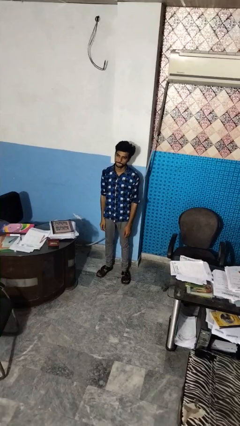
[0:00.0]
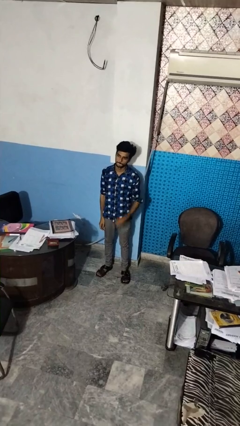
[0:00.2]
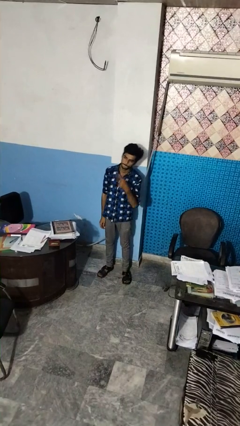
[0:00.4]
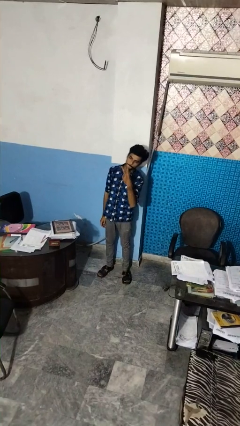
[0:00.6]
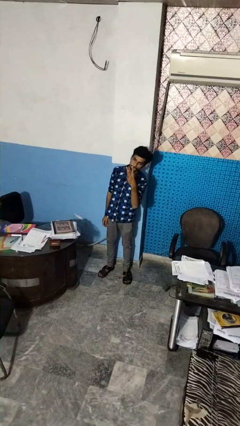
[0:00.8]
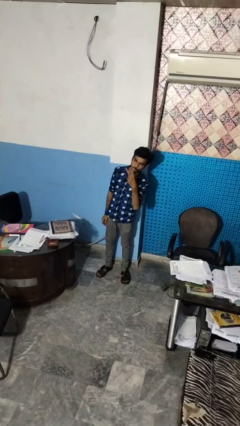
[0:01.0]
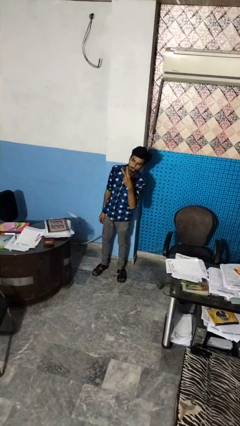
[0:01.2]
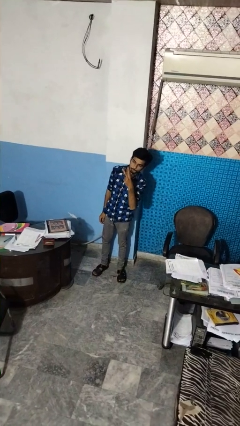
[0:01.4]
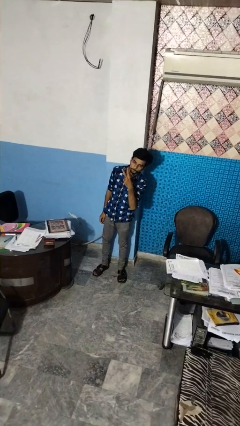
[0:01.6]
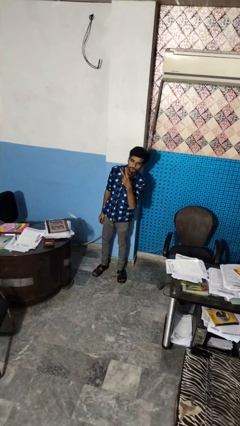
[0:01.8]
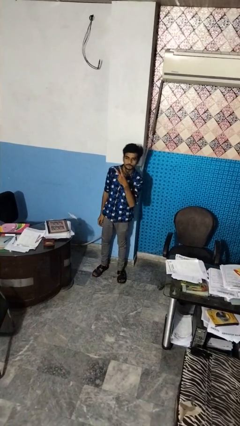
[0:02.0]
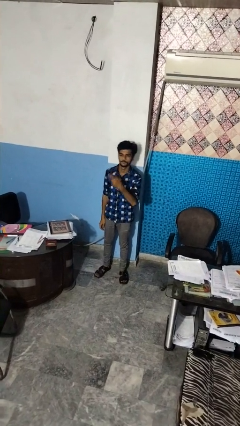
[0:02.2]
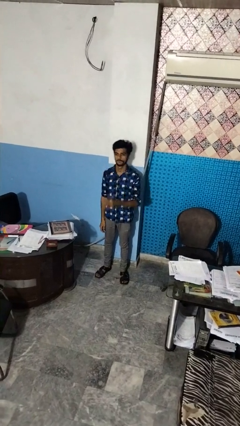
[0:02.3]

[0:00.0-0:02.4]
person gestures peace

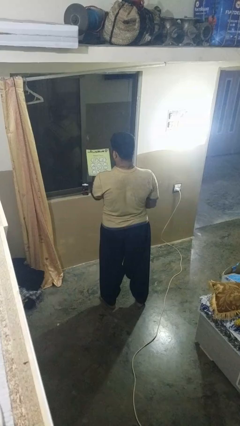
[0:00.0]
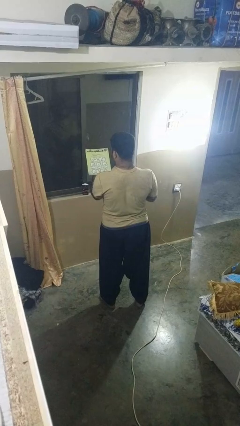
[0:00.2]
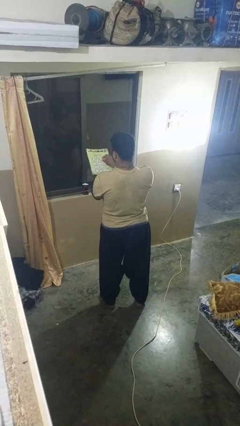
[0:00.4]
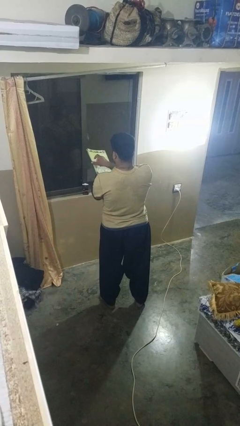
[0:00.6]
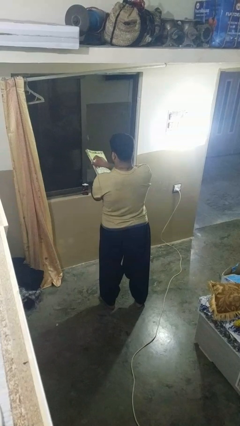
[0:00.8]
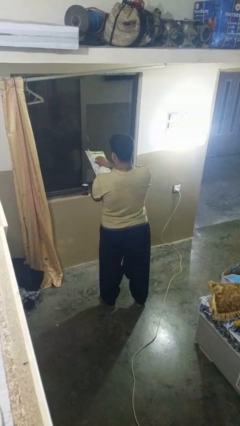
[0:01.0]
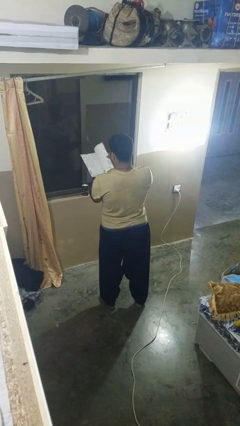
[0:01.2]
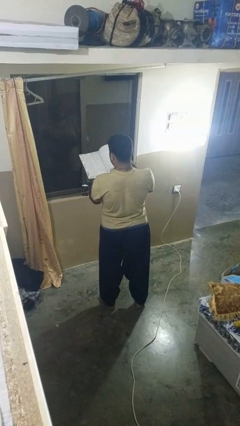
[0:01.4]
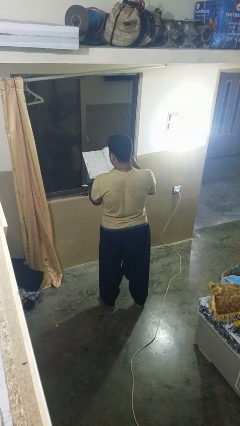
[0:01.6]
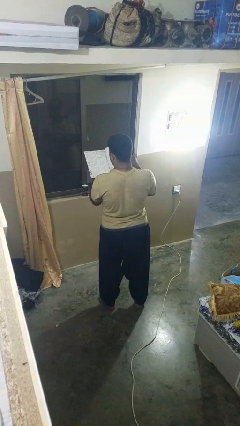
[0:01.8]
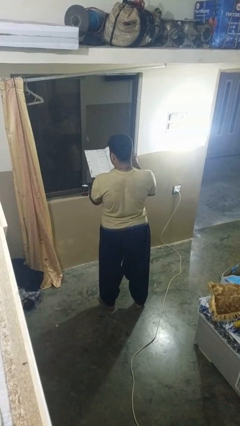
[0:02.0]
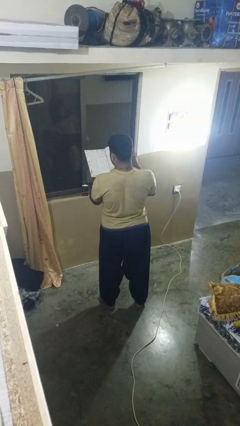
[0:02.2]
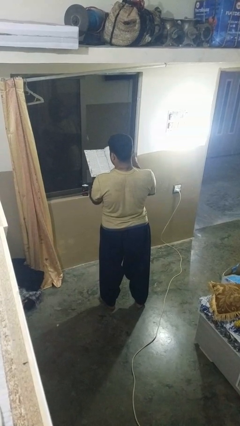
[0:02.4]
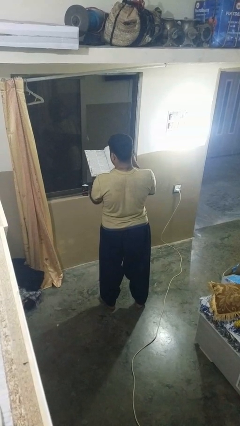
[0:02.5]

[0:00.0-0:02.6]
person reads magazine

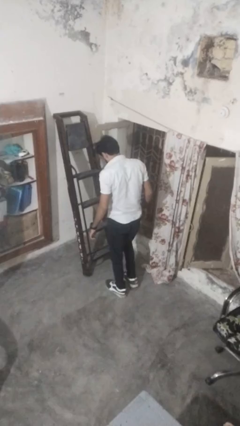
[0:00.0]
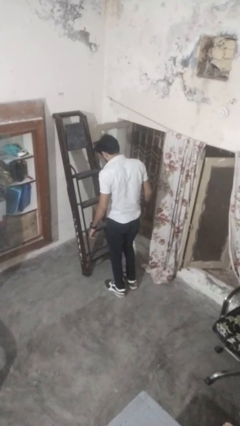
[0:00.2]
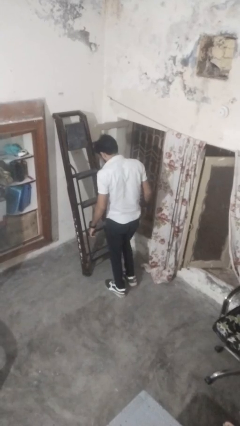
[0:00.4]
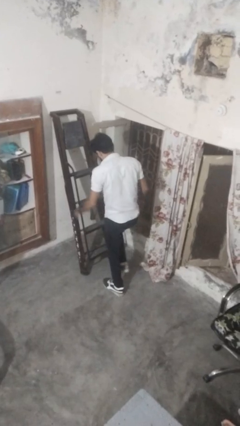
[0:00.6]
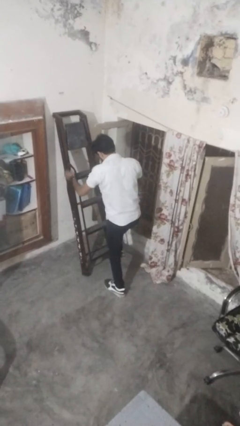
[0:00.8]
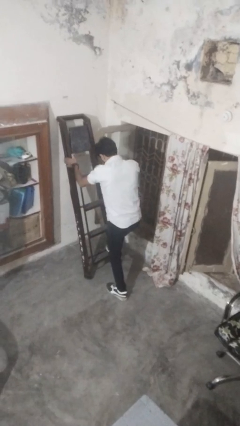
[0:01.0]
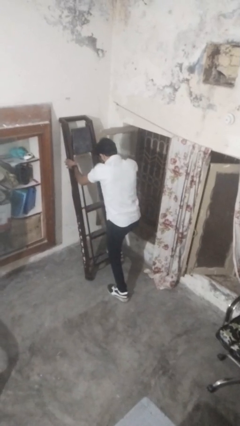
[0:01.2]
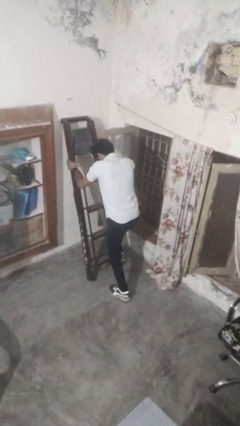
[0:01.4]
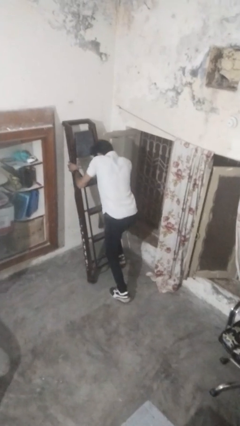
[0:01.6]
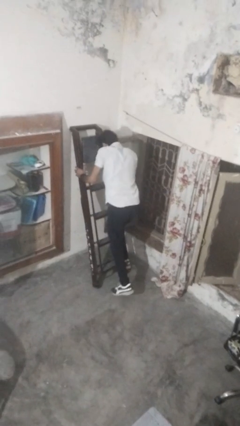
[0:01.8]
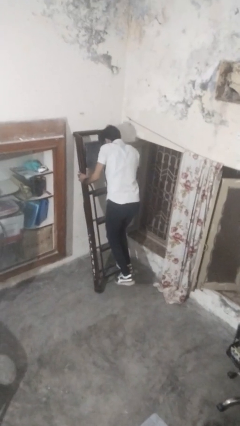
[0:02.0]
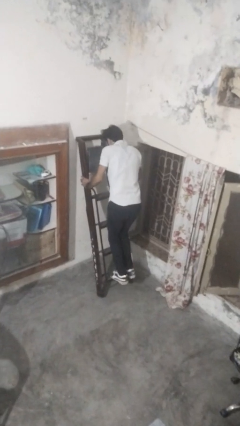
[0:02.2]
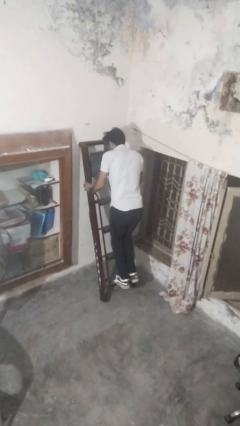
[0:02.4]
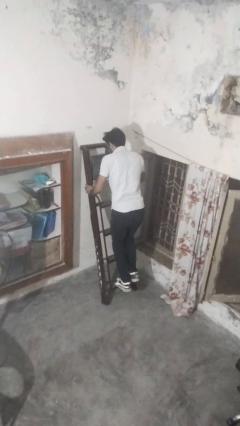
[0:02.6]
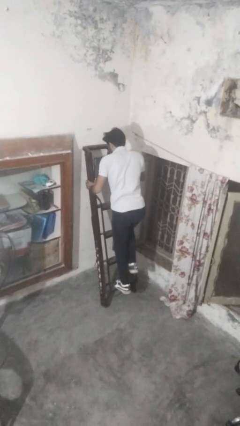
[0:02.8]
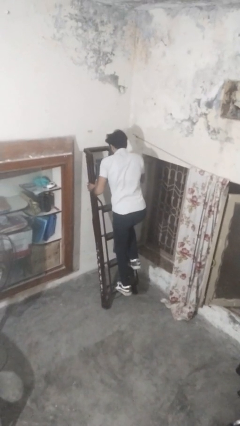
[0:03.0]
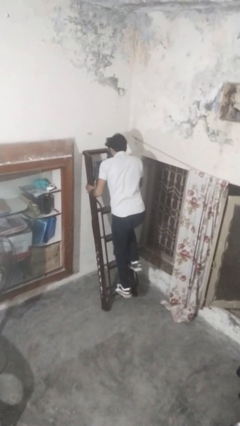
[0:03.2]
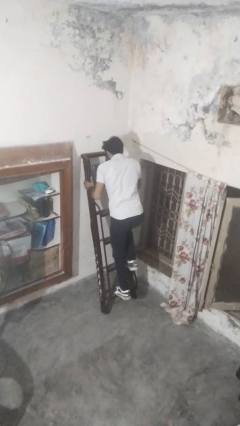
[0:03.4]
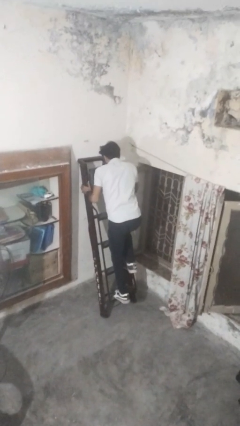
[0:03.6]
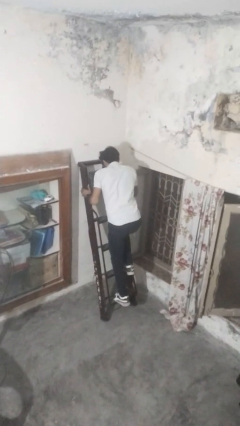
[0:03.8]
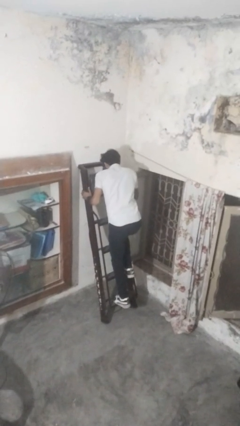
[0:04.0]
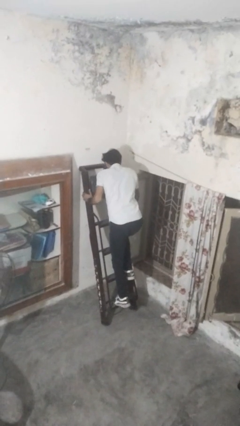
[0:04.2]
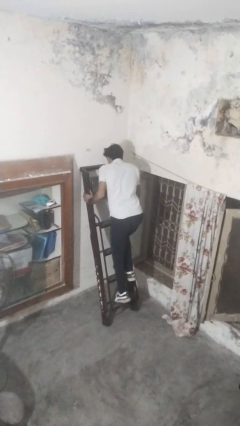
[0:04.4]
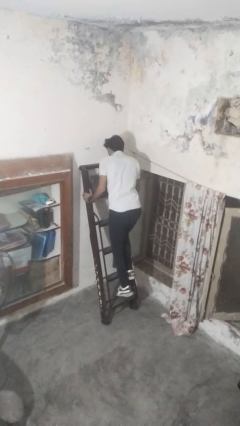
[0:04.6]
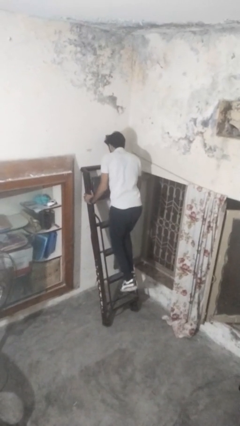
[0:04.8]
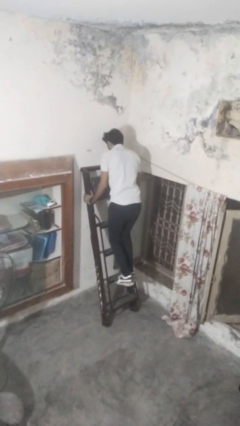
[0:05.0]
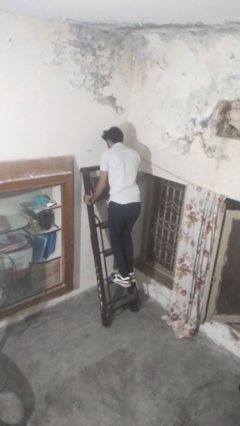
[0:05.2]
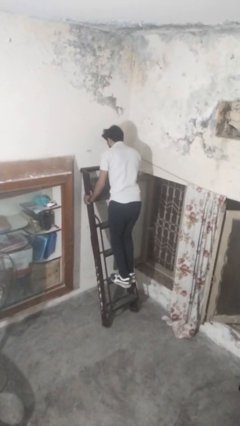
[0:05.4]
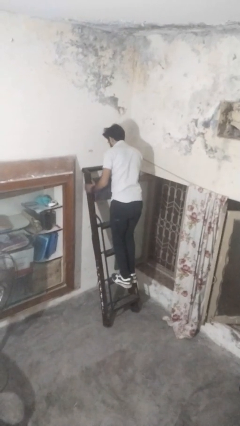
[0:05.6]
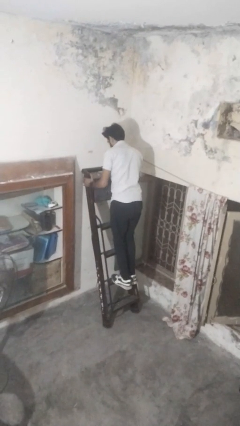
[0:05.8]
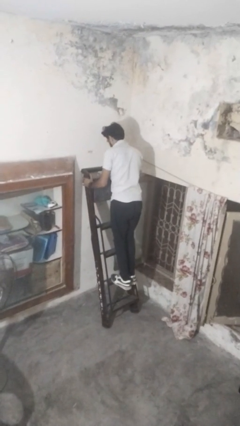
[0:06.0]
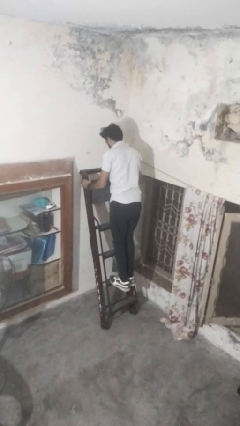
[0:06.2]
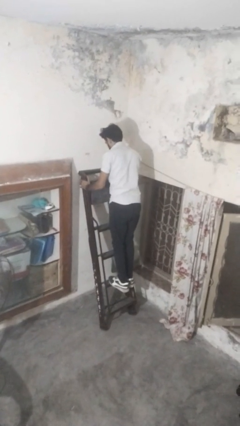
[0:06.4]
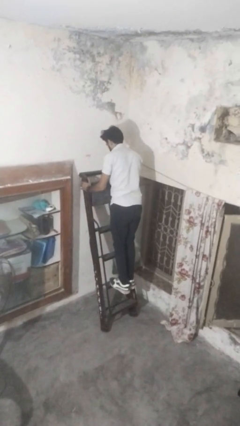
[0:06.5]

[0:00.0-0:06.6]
person climbs up ladder

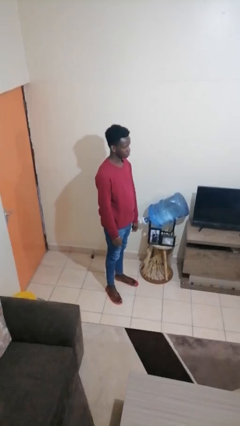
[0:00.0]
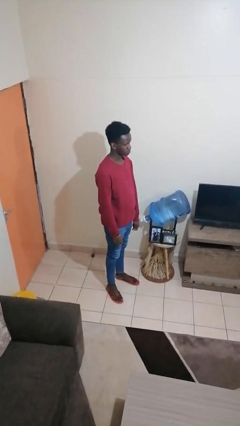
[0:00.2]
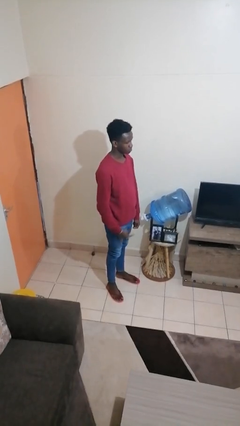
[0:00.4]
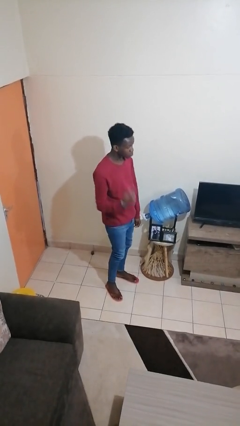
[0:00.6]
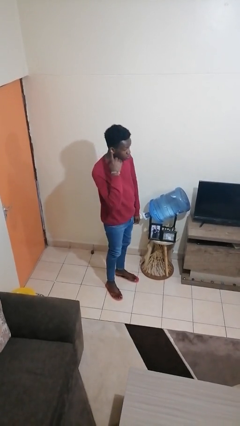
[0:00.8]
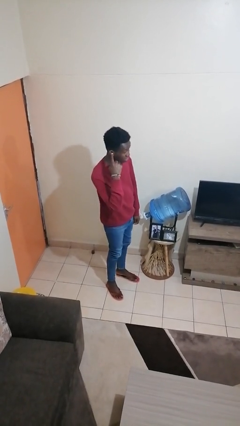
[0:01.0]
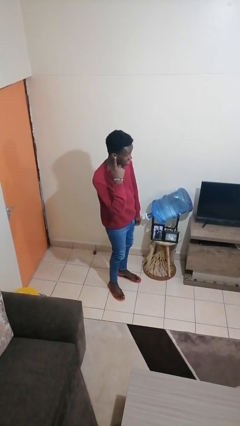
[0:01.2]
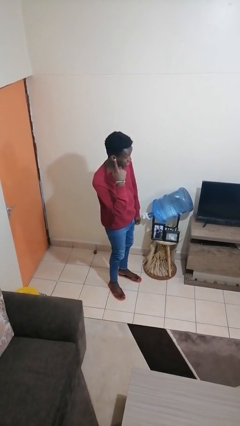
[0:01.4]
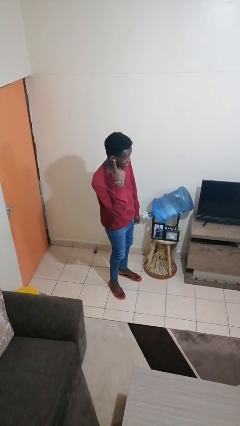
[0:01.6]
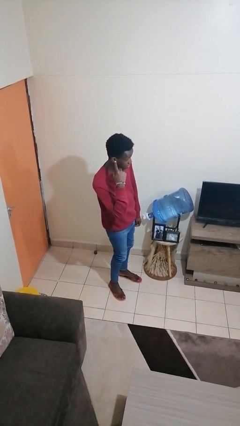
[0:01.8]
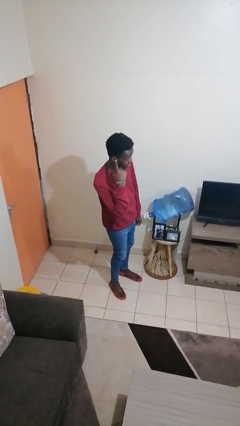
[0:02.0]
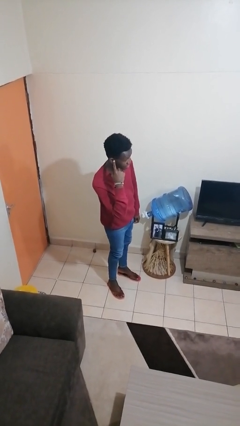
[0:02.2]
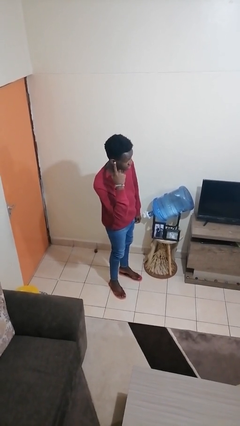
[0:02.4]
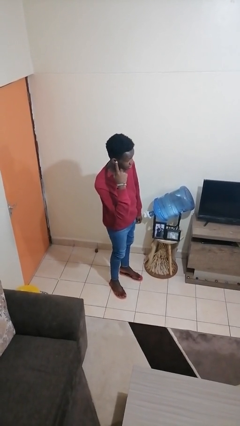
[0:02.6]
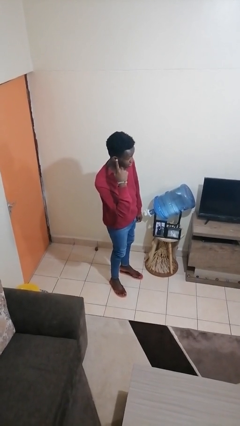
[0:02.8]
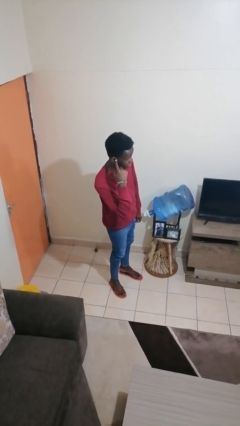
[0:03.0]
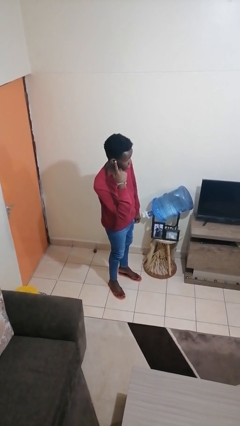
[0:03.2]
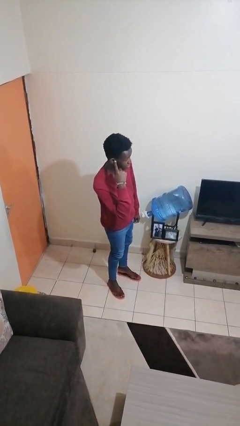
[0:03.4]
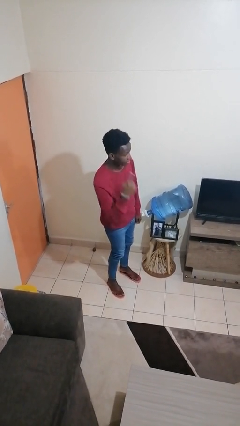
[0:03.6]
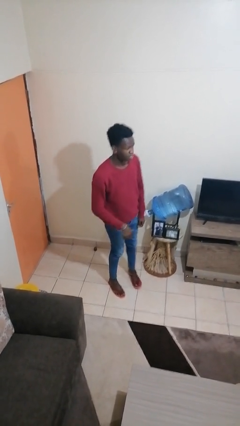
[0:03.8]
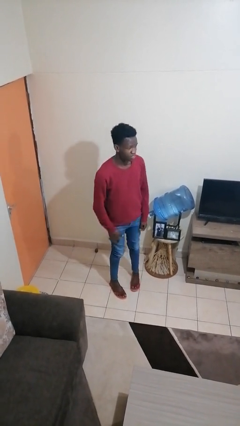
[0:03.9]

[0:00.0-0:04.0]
person gestures listen closely

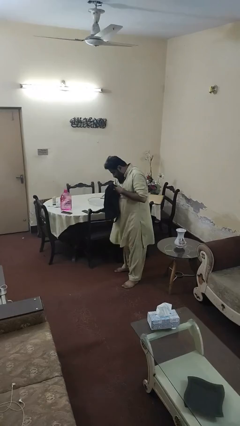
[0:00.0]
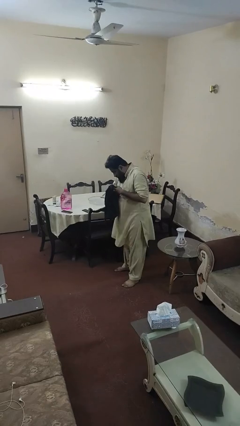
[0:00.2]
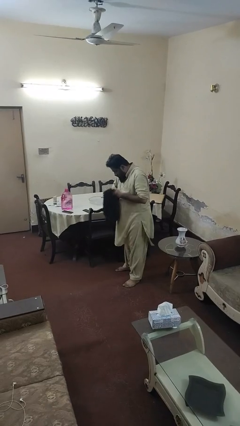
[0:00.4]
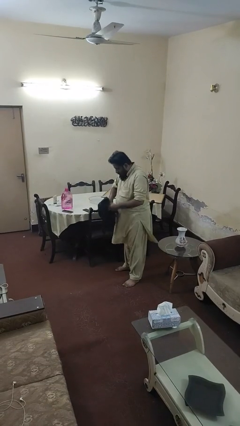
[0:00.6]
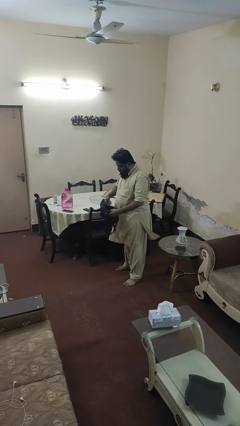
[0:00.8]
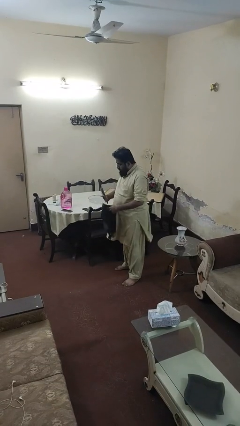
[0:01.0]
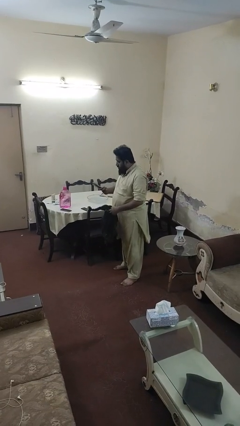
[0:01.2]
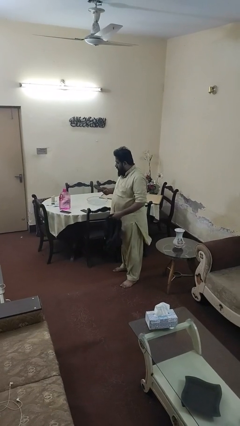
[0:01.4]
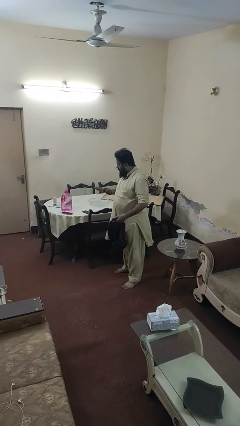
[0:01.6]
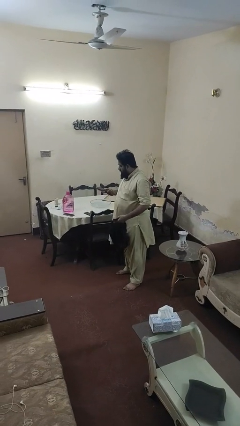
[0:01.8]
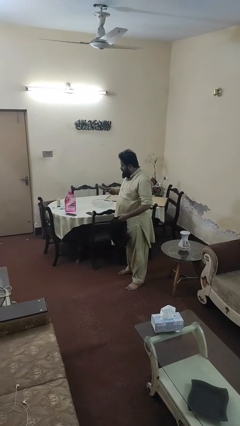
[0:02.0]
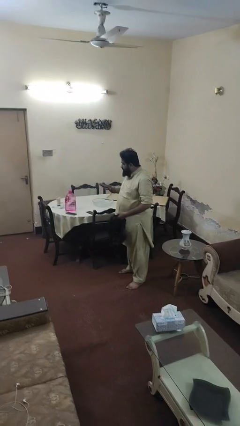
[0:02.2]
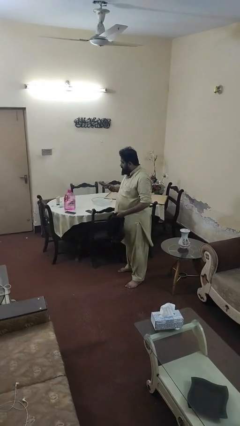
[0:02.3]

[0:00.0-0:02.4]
person takes object from backpack
